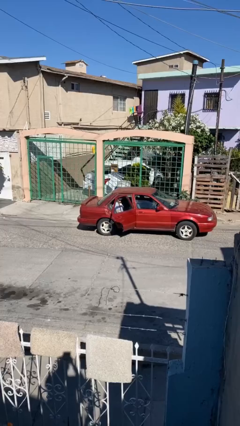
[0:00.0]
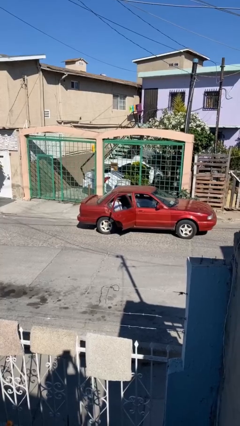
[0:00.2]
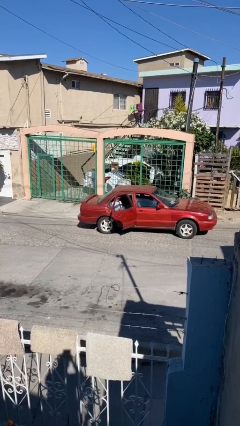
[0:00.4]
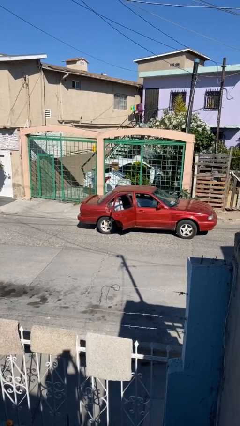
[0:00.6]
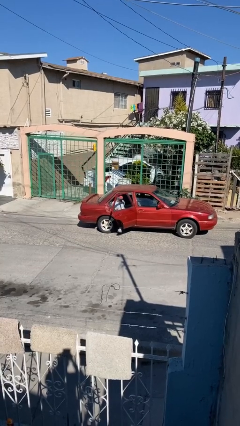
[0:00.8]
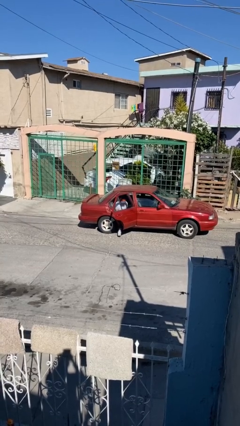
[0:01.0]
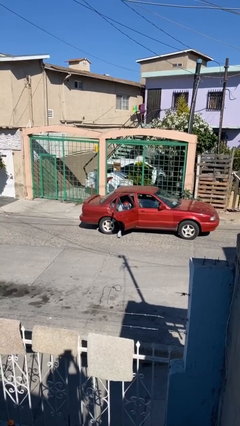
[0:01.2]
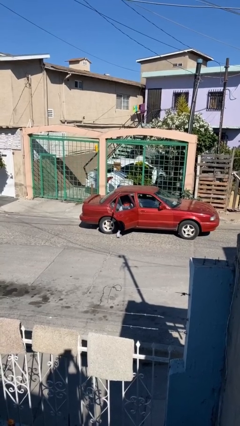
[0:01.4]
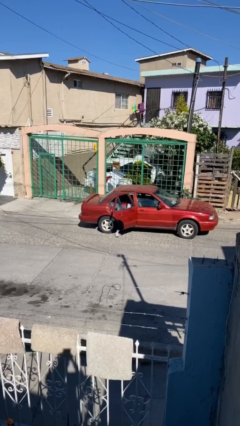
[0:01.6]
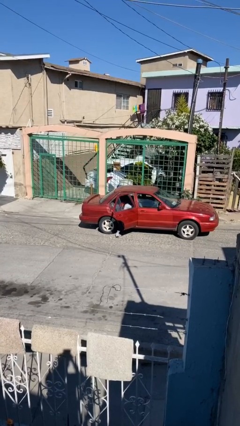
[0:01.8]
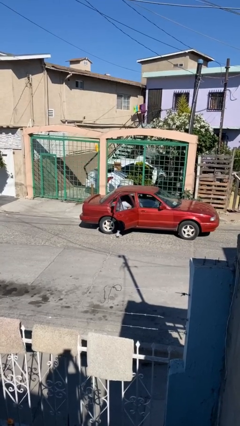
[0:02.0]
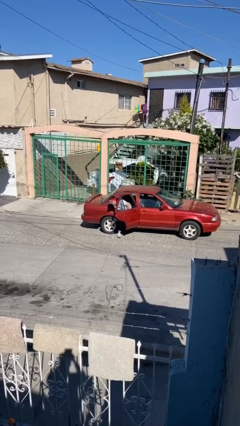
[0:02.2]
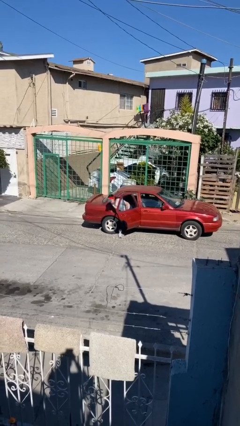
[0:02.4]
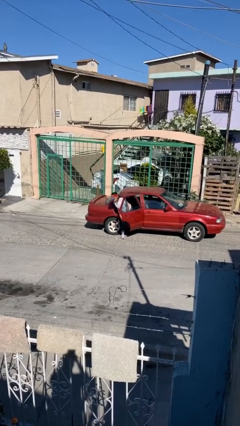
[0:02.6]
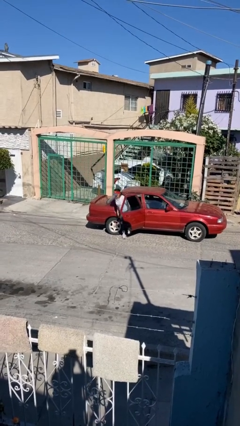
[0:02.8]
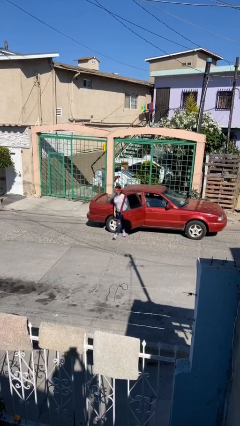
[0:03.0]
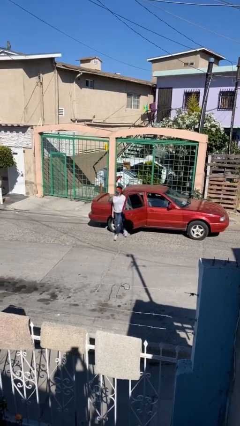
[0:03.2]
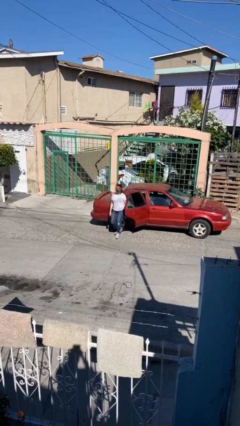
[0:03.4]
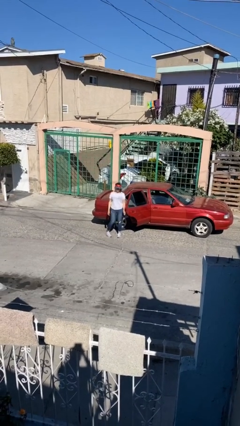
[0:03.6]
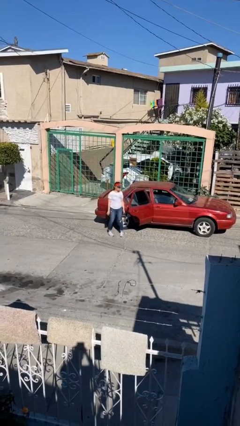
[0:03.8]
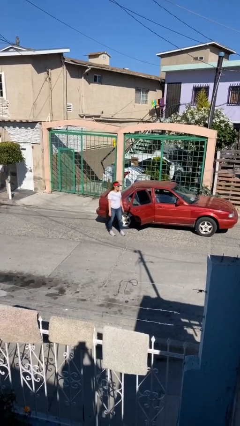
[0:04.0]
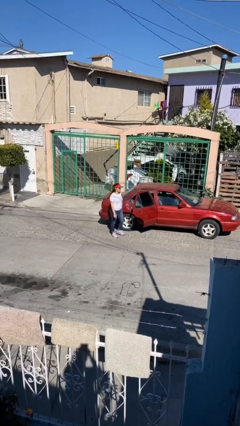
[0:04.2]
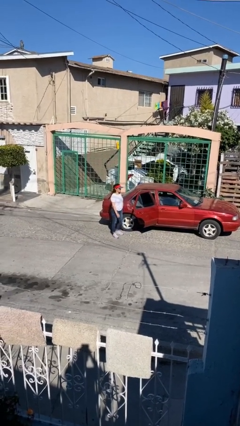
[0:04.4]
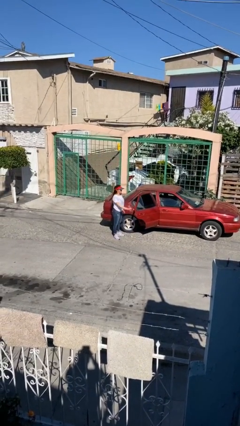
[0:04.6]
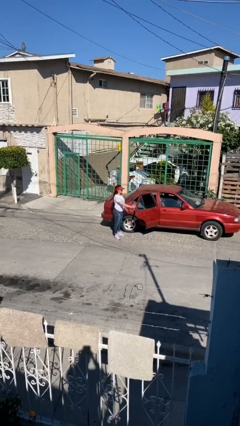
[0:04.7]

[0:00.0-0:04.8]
person exits car

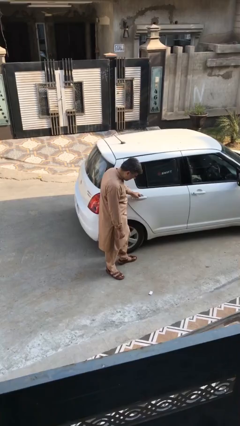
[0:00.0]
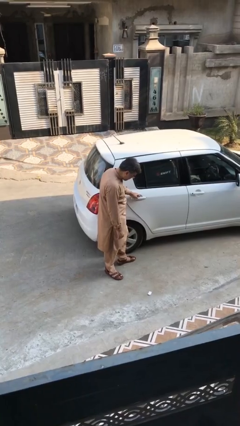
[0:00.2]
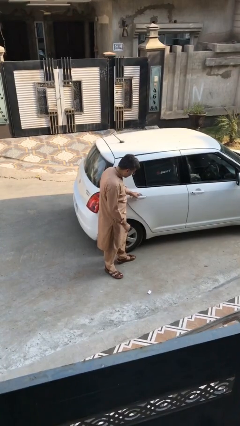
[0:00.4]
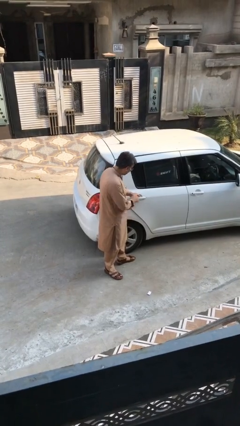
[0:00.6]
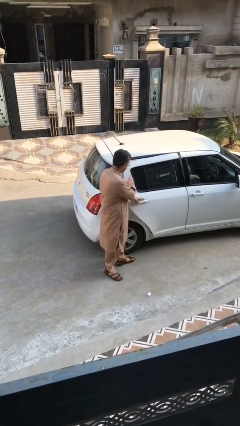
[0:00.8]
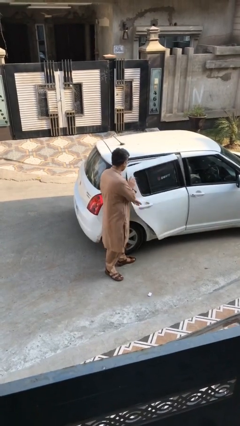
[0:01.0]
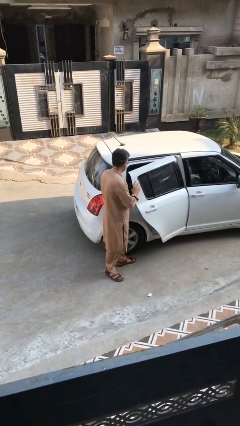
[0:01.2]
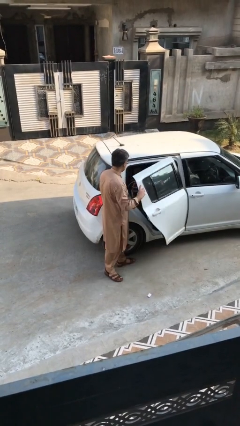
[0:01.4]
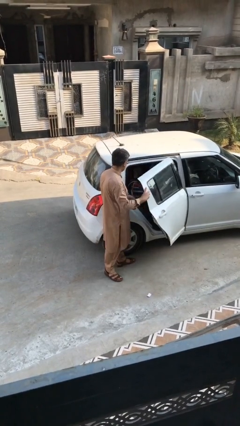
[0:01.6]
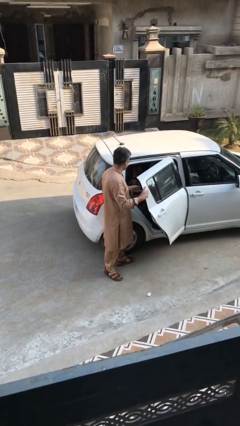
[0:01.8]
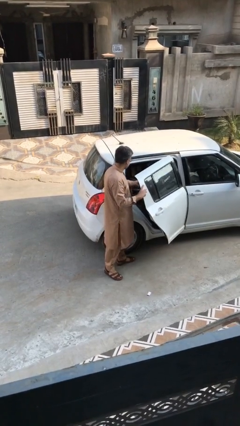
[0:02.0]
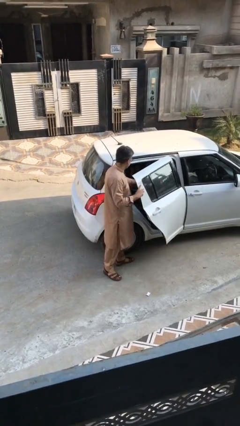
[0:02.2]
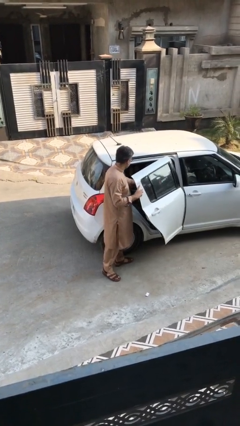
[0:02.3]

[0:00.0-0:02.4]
person opens car door

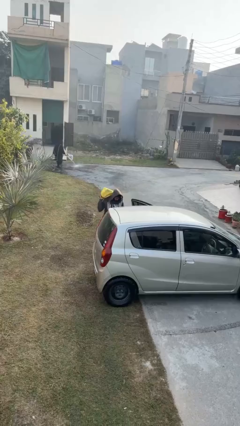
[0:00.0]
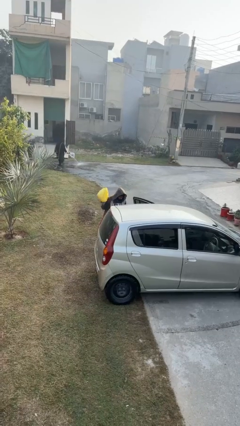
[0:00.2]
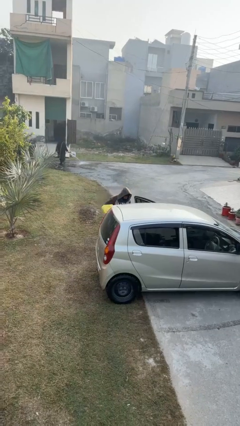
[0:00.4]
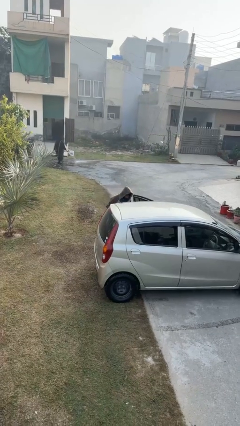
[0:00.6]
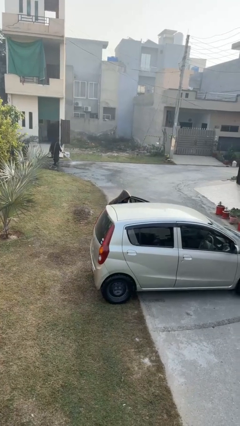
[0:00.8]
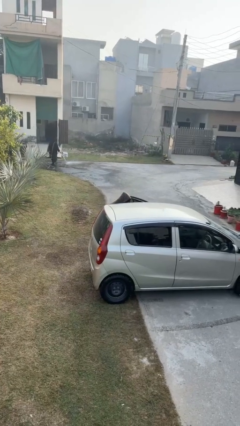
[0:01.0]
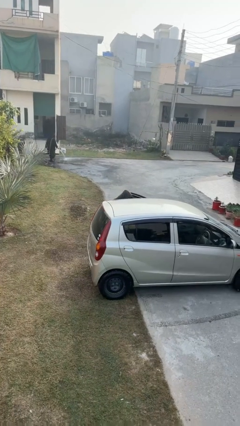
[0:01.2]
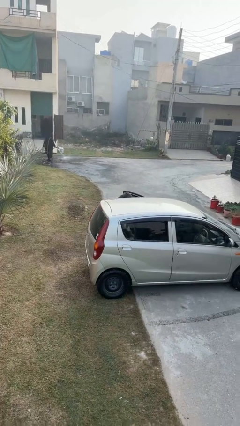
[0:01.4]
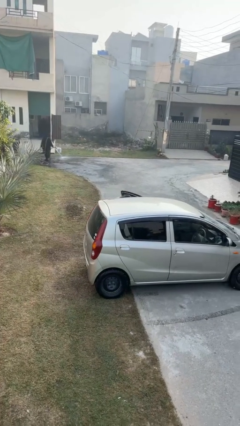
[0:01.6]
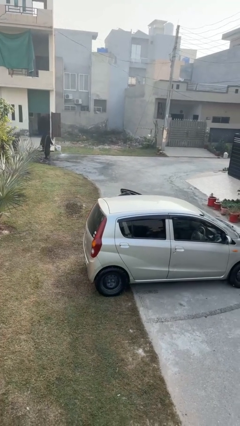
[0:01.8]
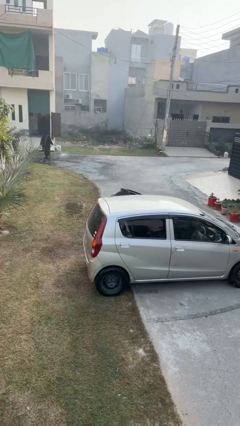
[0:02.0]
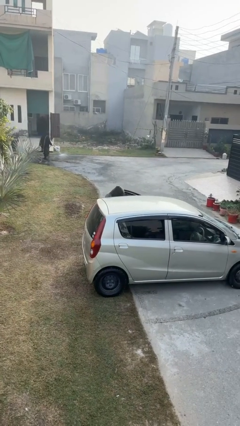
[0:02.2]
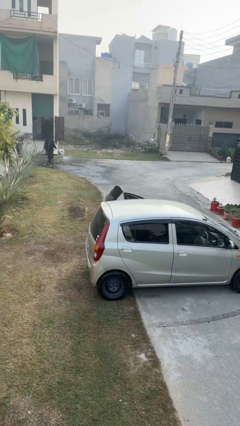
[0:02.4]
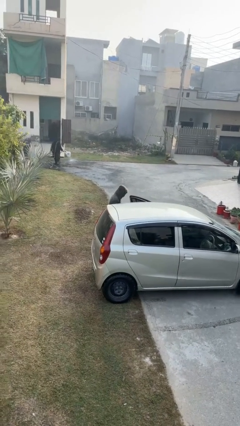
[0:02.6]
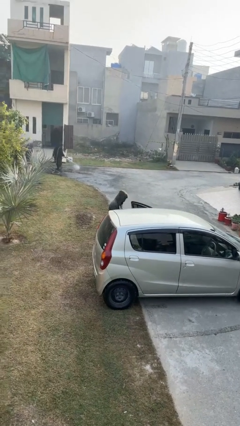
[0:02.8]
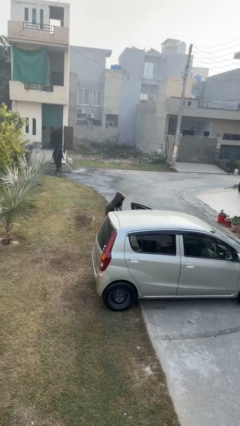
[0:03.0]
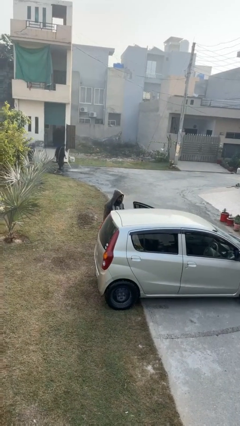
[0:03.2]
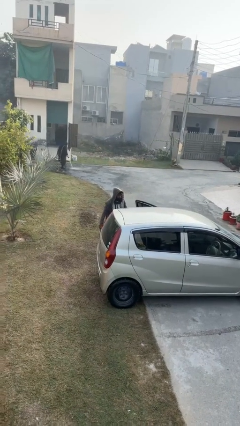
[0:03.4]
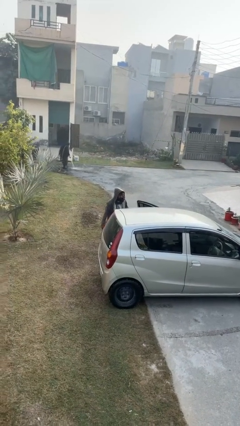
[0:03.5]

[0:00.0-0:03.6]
person loads car

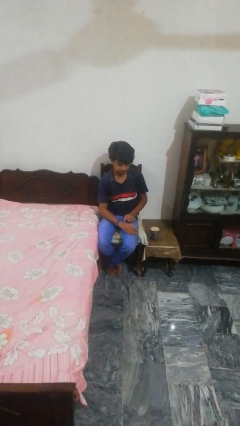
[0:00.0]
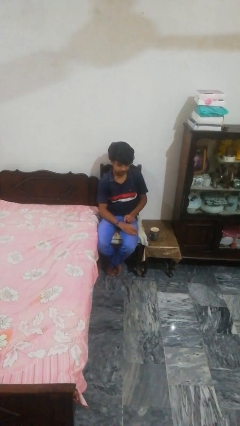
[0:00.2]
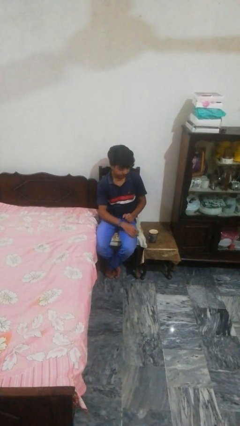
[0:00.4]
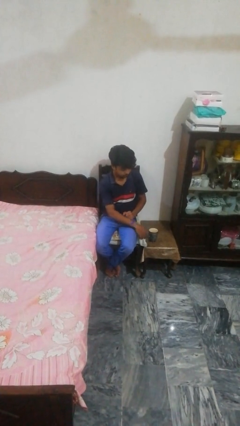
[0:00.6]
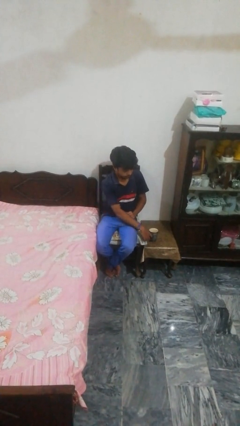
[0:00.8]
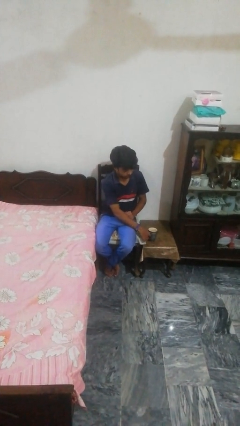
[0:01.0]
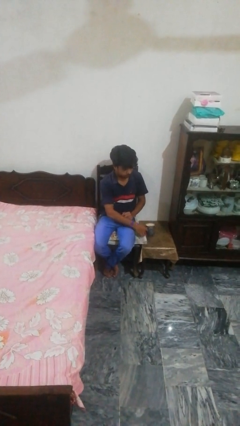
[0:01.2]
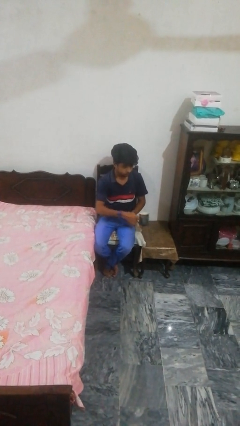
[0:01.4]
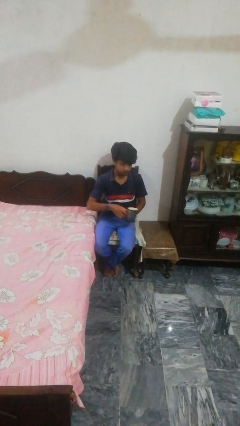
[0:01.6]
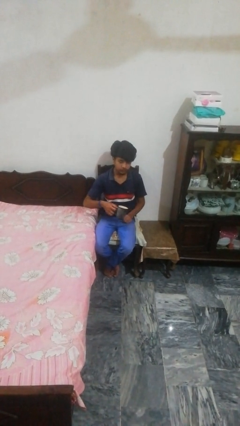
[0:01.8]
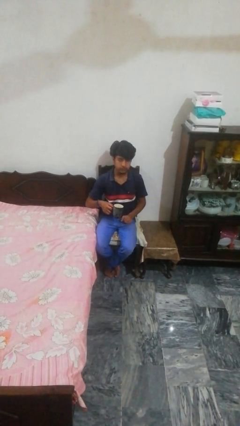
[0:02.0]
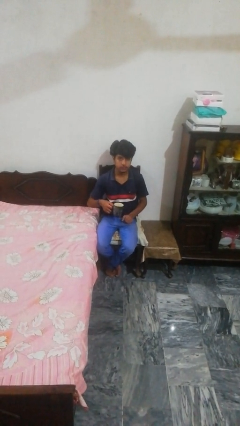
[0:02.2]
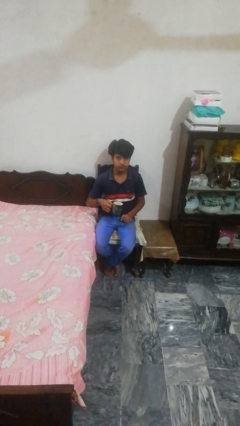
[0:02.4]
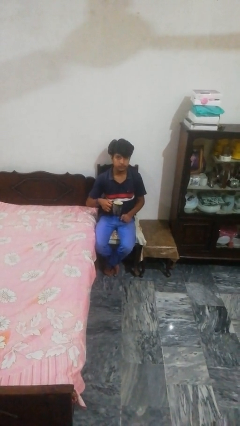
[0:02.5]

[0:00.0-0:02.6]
person picks up object from table

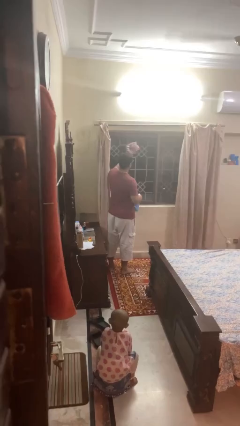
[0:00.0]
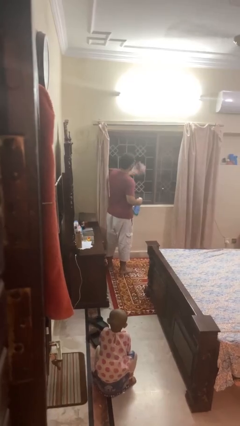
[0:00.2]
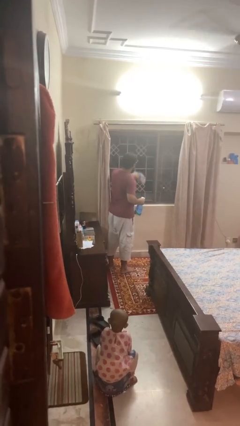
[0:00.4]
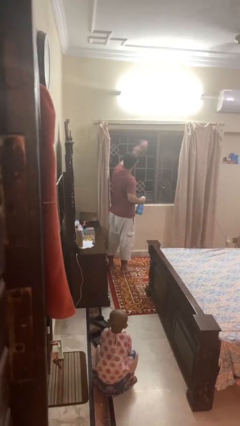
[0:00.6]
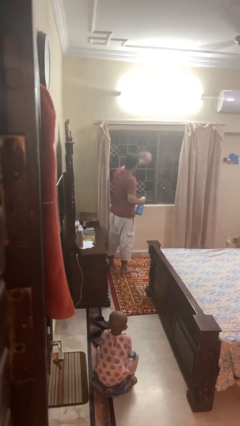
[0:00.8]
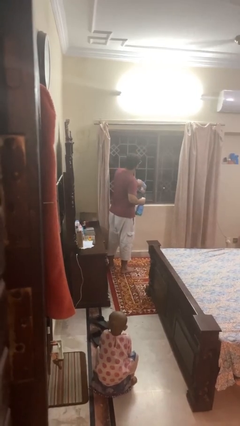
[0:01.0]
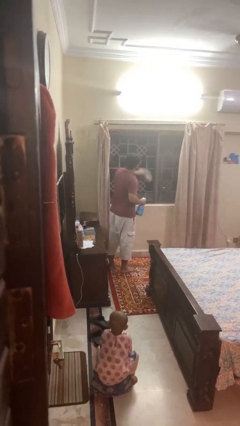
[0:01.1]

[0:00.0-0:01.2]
person washes window

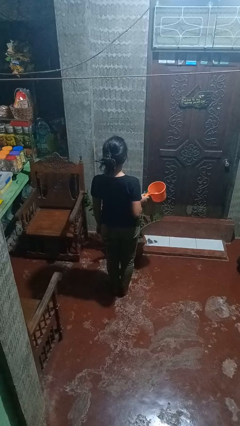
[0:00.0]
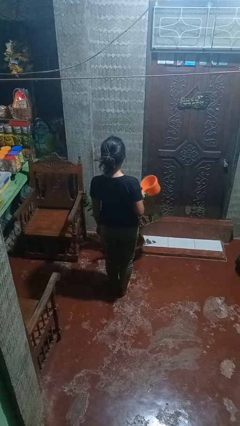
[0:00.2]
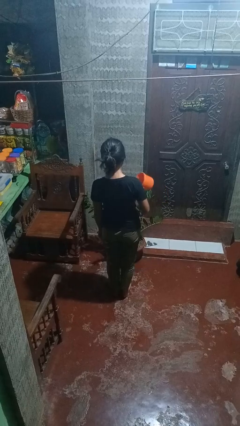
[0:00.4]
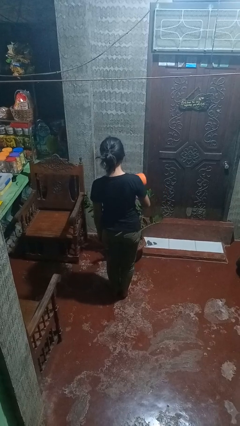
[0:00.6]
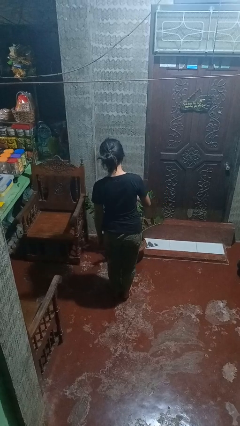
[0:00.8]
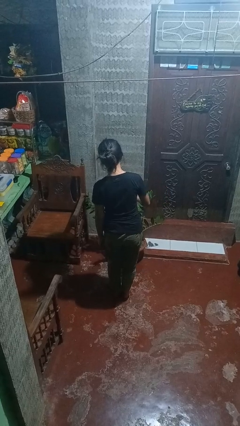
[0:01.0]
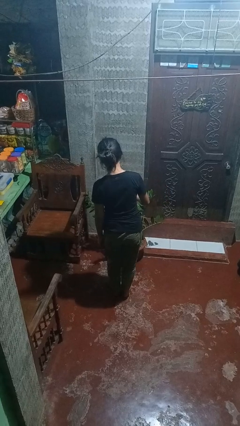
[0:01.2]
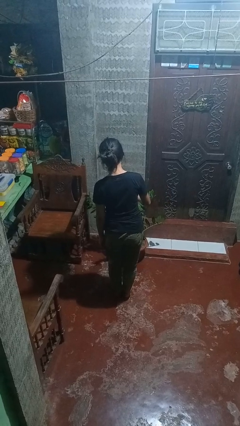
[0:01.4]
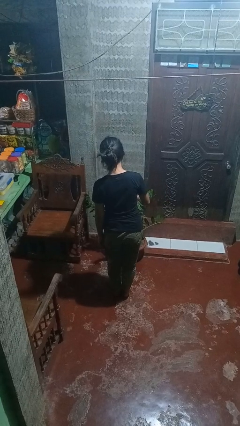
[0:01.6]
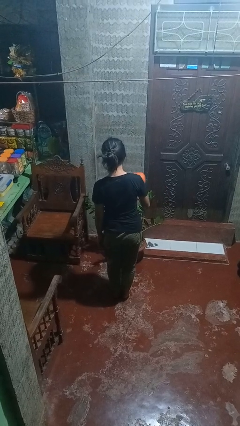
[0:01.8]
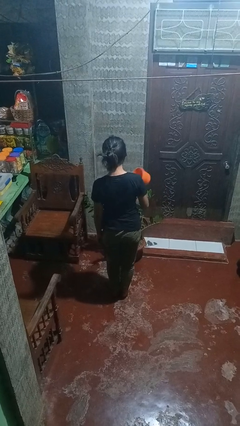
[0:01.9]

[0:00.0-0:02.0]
person waters houseplant

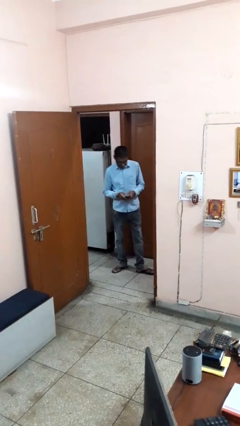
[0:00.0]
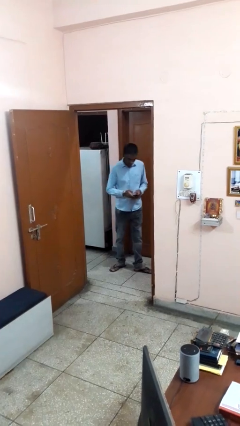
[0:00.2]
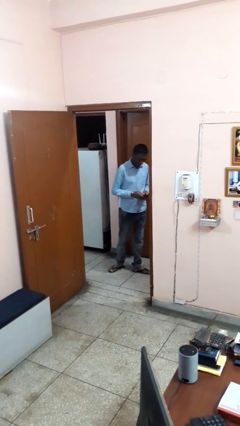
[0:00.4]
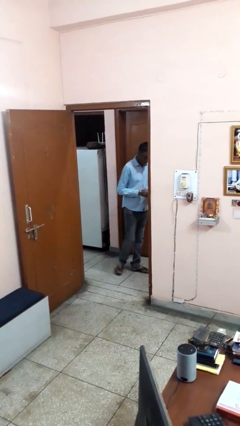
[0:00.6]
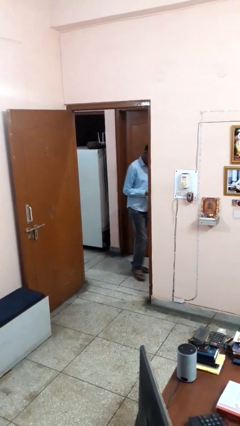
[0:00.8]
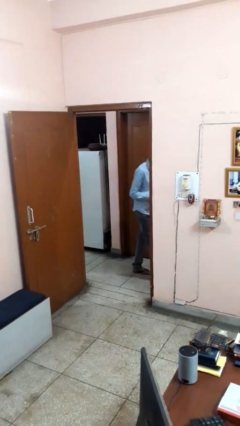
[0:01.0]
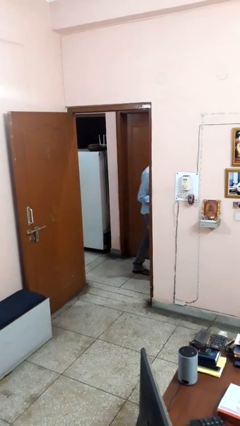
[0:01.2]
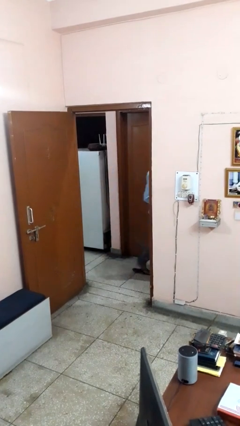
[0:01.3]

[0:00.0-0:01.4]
person exits scene through structure
